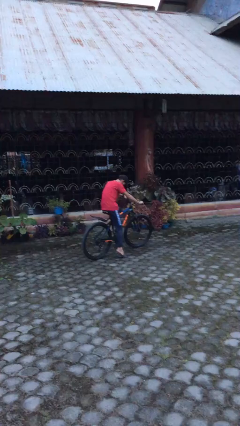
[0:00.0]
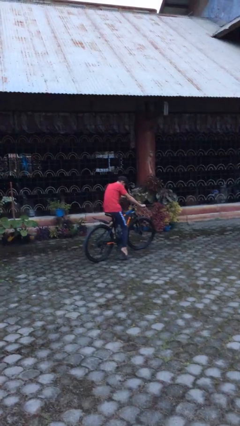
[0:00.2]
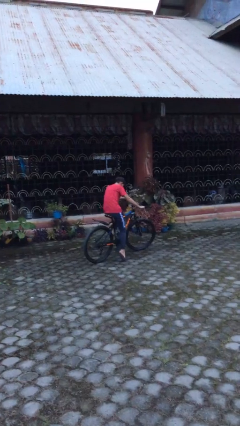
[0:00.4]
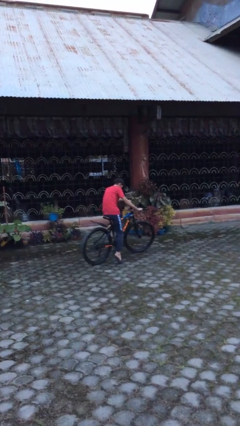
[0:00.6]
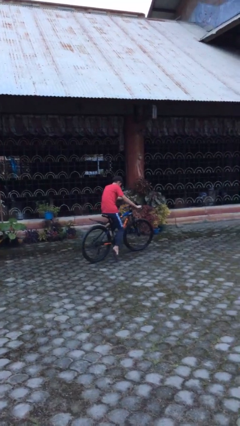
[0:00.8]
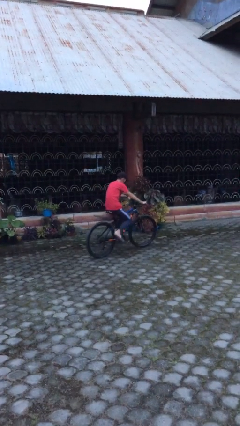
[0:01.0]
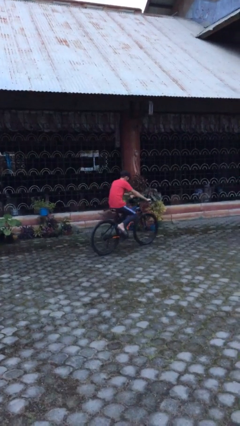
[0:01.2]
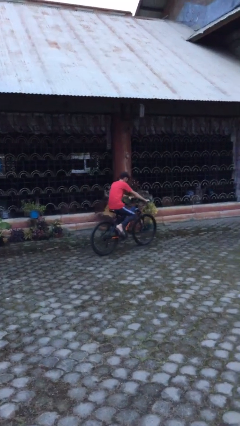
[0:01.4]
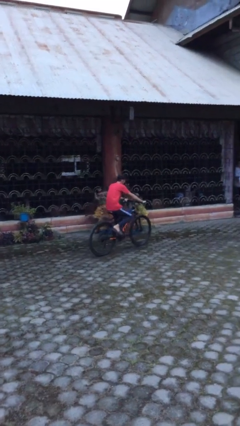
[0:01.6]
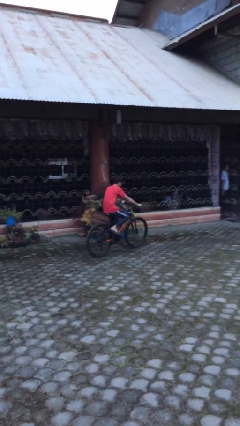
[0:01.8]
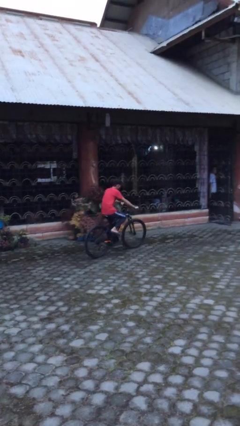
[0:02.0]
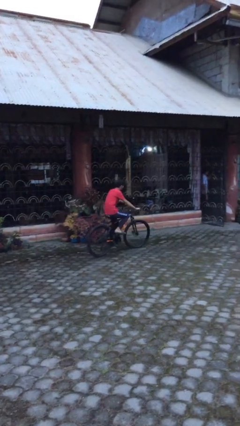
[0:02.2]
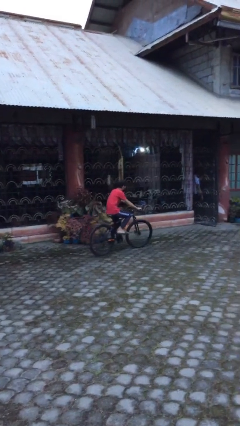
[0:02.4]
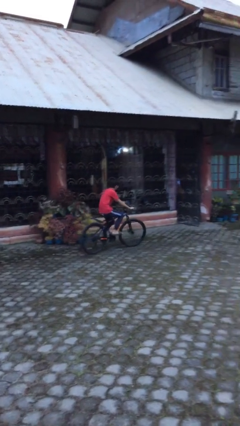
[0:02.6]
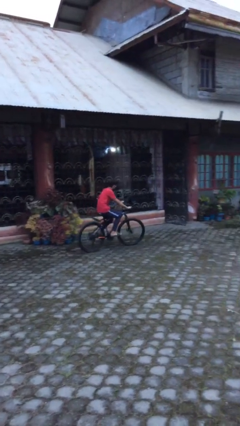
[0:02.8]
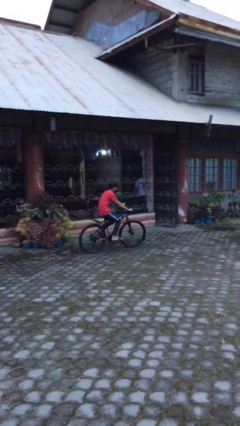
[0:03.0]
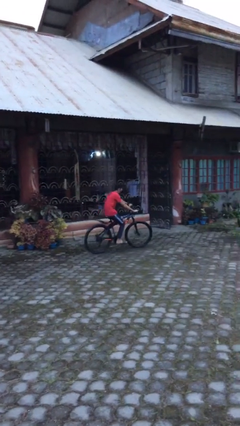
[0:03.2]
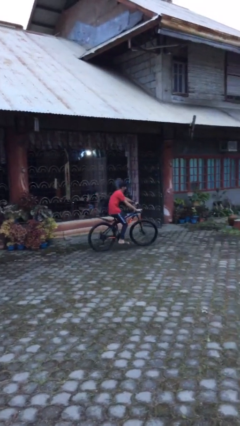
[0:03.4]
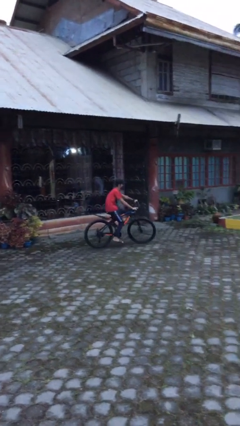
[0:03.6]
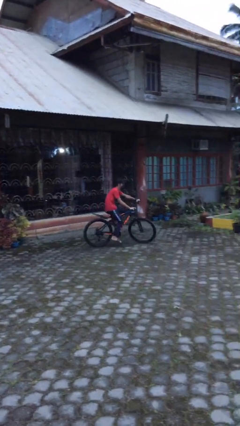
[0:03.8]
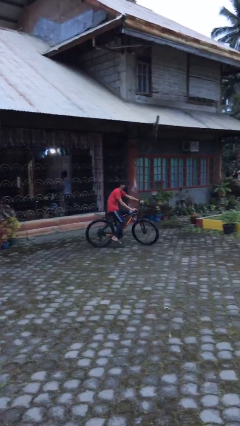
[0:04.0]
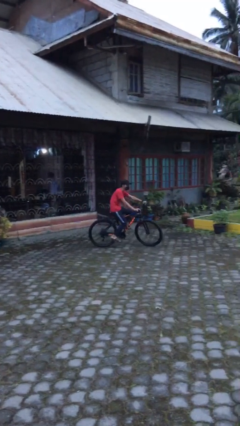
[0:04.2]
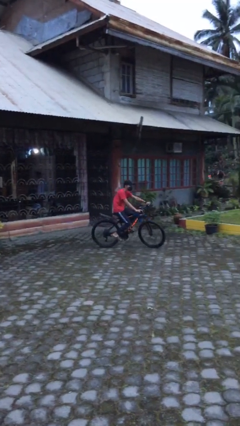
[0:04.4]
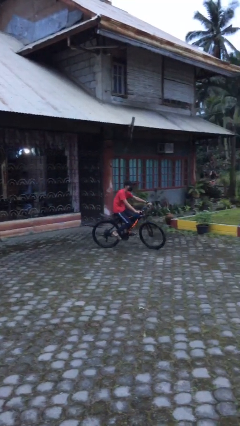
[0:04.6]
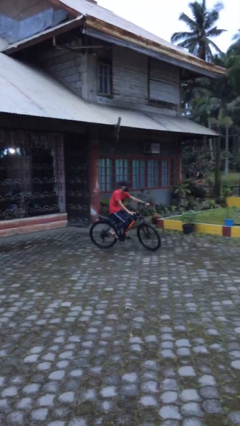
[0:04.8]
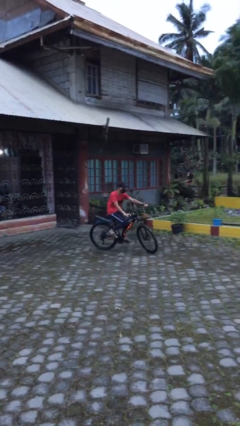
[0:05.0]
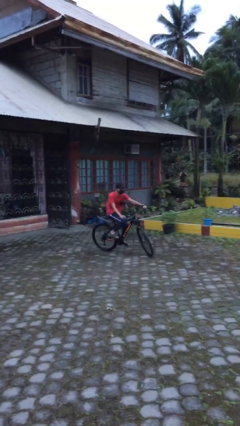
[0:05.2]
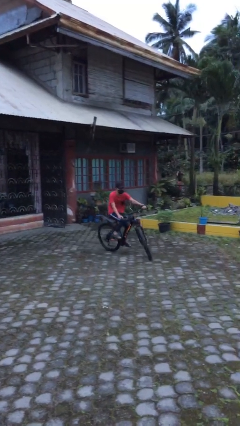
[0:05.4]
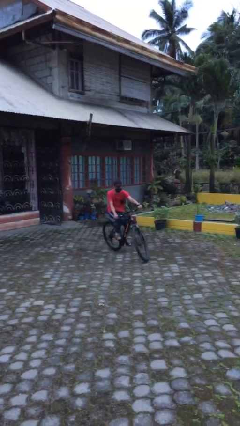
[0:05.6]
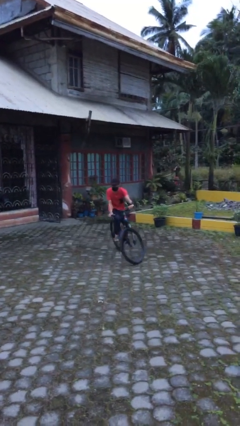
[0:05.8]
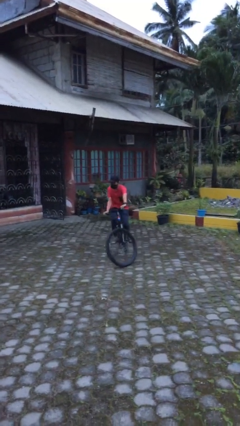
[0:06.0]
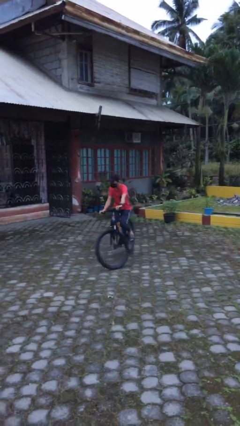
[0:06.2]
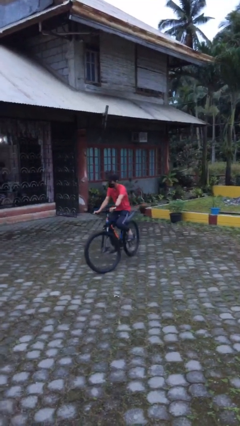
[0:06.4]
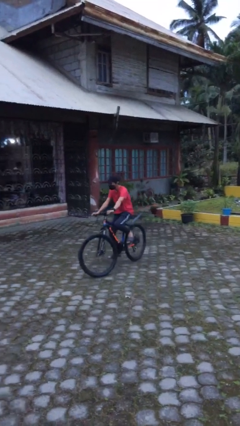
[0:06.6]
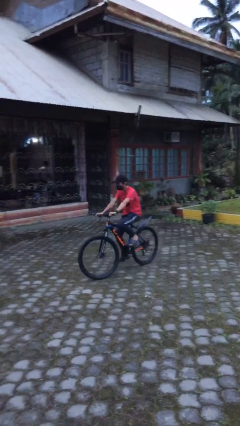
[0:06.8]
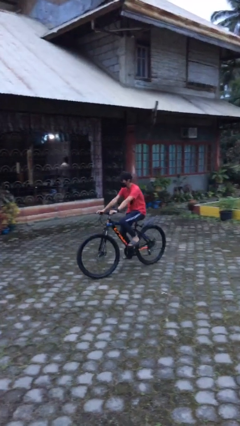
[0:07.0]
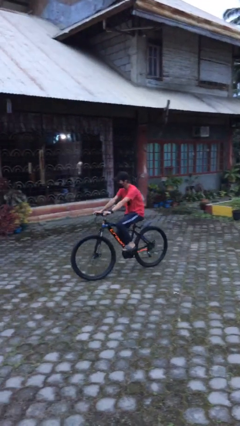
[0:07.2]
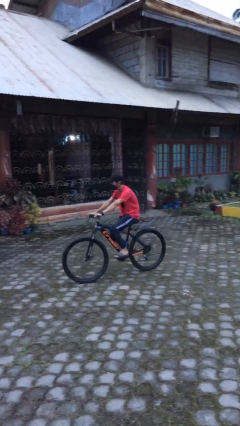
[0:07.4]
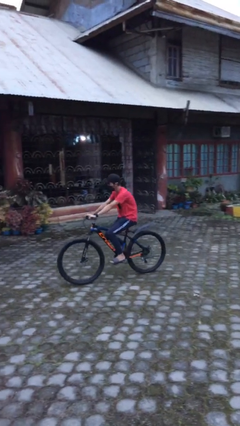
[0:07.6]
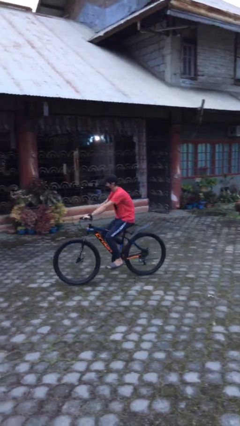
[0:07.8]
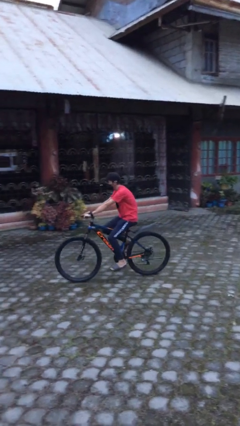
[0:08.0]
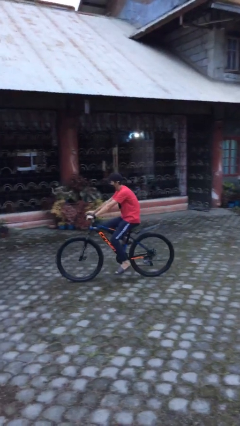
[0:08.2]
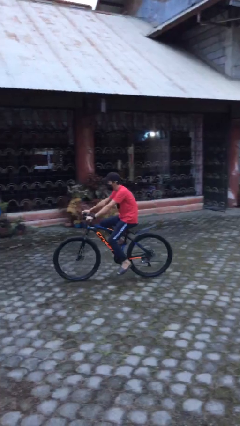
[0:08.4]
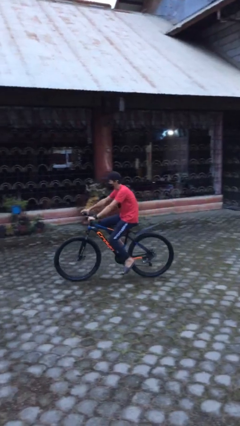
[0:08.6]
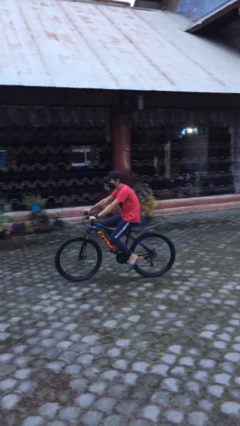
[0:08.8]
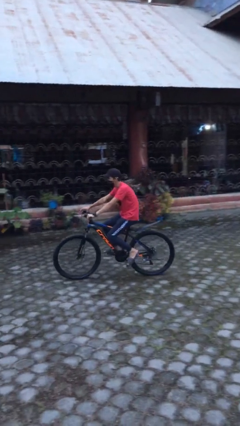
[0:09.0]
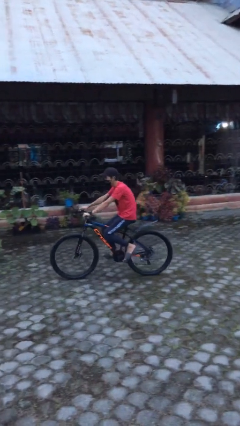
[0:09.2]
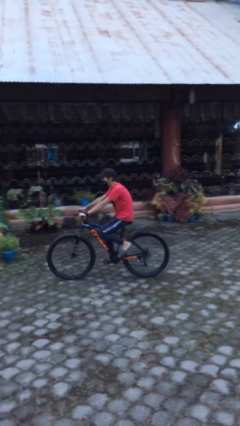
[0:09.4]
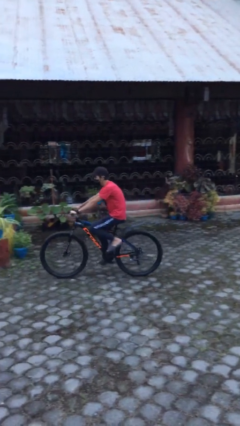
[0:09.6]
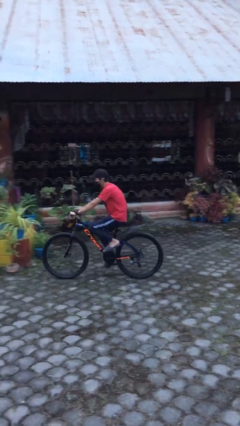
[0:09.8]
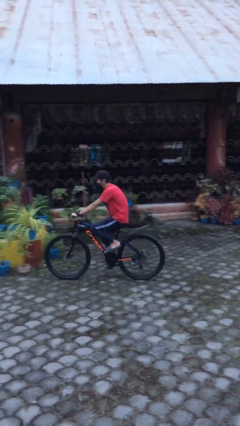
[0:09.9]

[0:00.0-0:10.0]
person rides bicycle

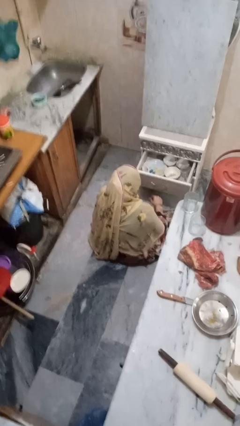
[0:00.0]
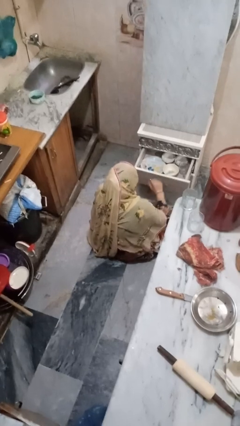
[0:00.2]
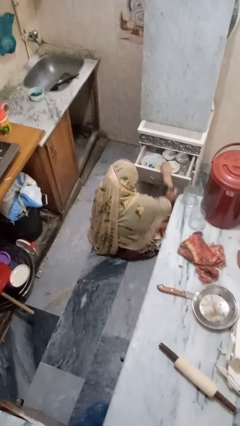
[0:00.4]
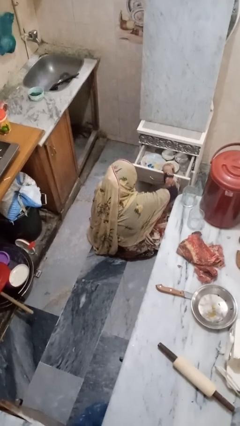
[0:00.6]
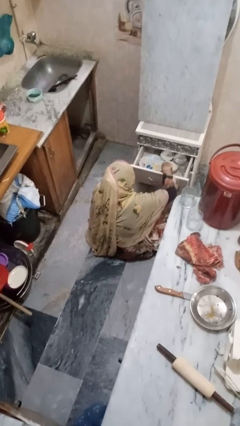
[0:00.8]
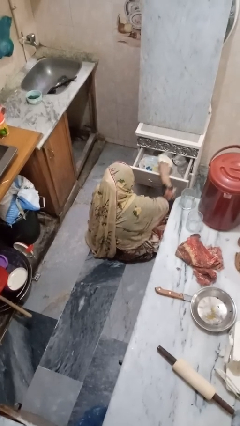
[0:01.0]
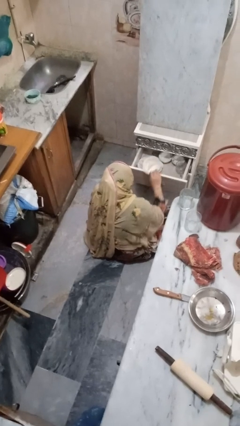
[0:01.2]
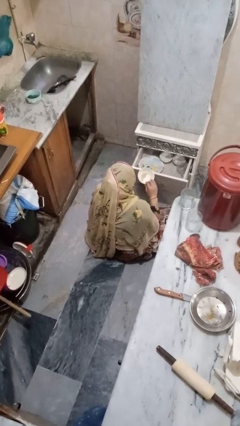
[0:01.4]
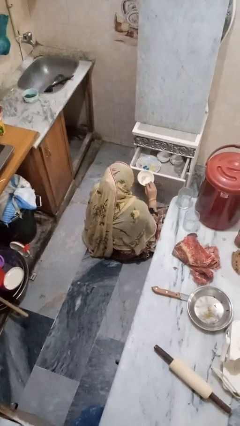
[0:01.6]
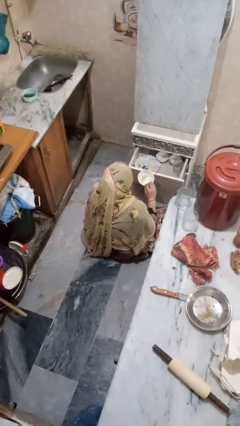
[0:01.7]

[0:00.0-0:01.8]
person takes object from kitchen drawer

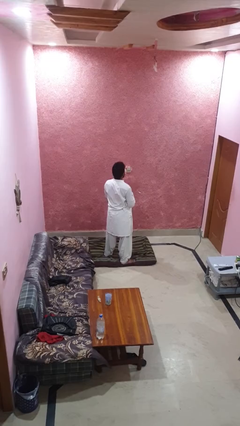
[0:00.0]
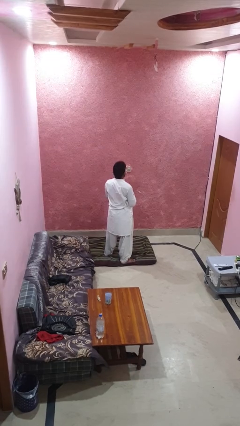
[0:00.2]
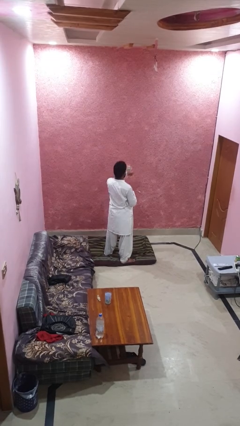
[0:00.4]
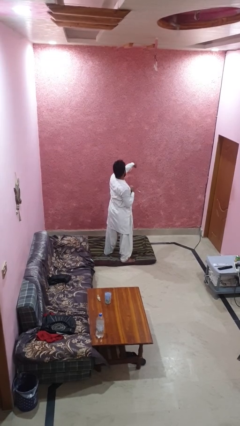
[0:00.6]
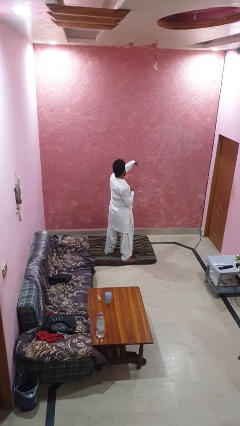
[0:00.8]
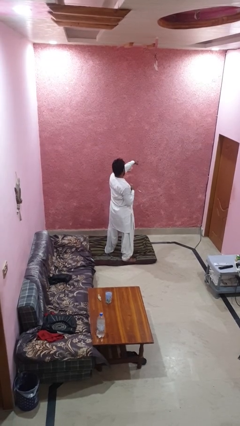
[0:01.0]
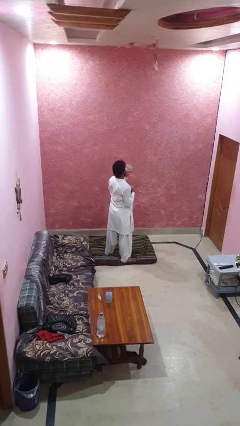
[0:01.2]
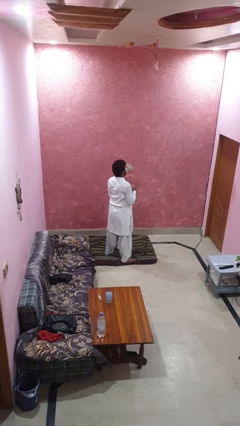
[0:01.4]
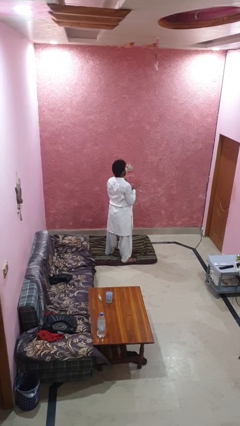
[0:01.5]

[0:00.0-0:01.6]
person punches

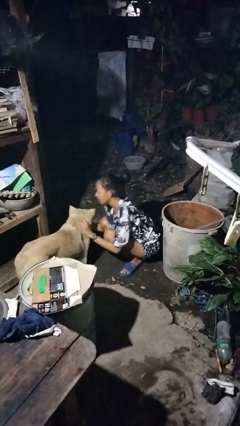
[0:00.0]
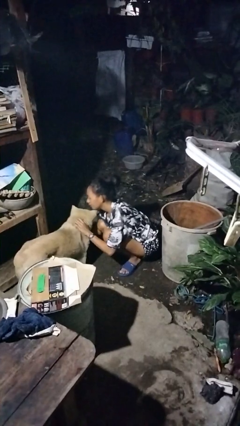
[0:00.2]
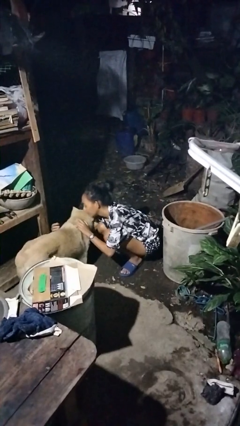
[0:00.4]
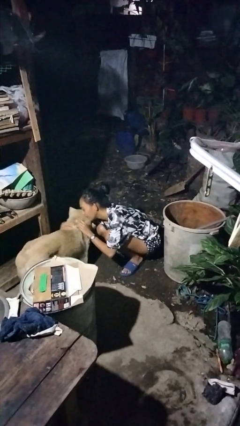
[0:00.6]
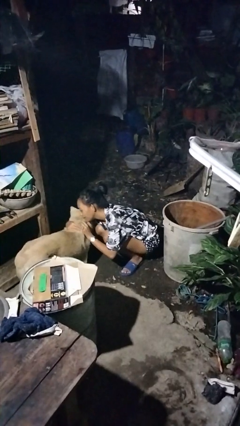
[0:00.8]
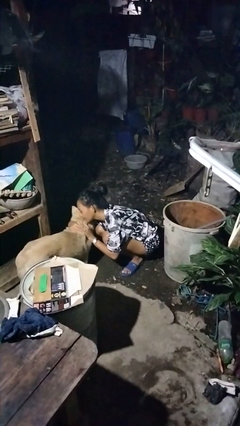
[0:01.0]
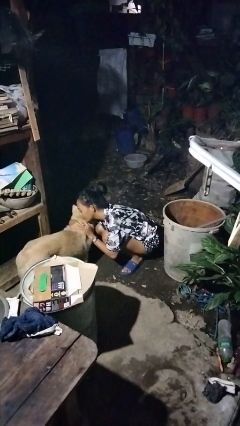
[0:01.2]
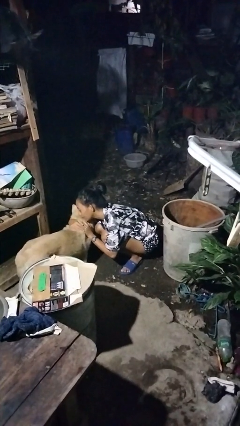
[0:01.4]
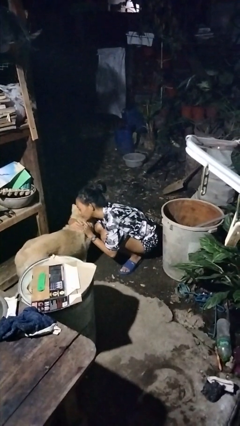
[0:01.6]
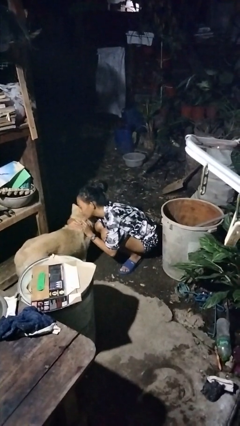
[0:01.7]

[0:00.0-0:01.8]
person hugs dog

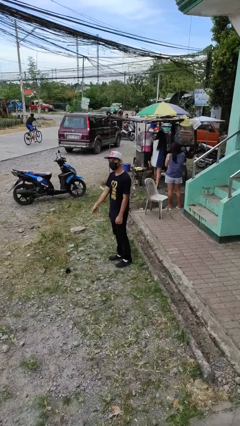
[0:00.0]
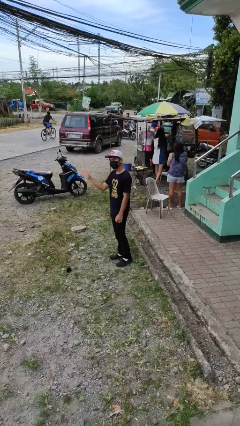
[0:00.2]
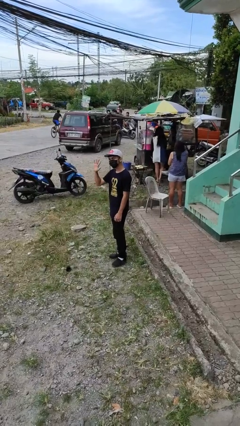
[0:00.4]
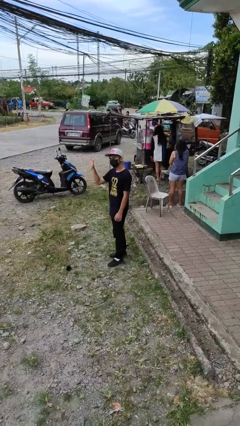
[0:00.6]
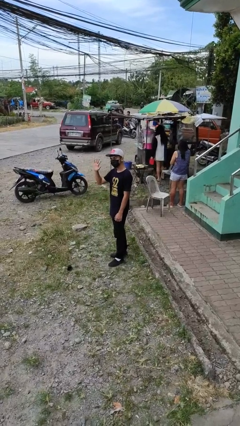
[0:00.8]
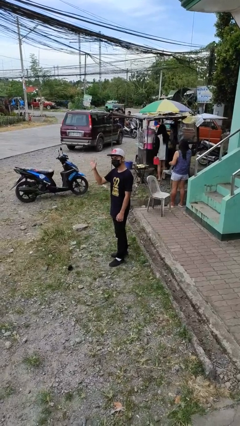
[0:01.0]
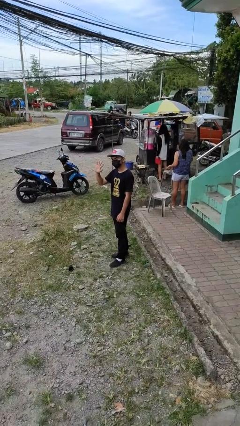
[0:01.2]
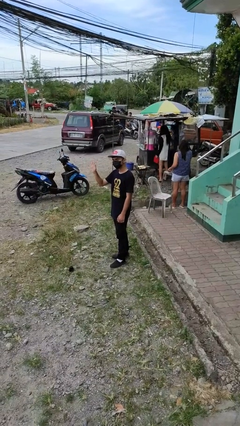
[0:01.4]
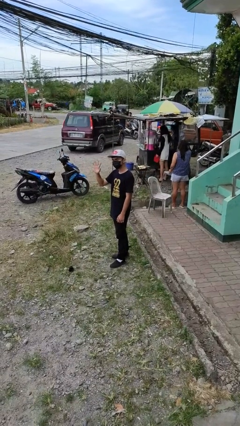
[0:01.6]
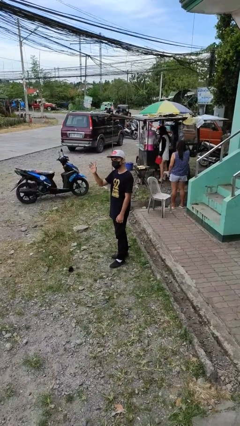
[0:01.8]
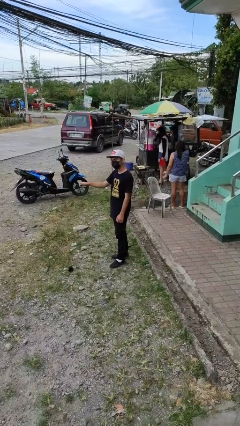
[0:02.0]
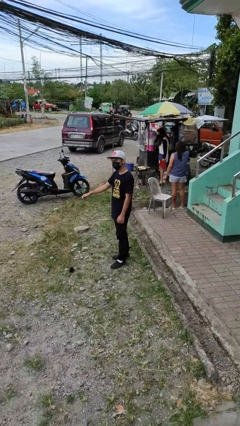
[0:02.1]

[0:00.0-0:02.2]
person waves at person
